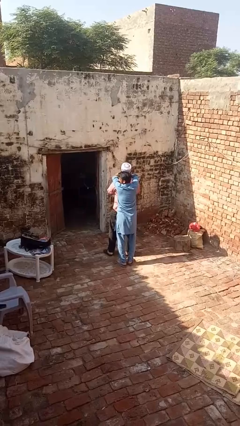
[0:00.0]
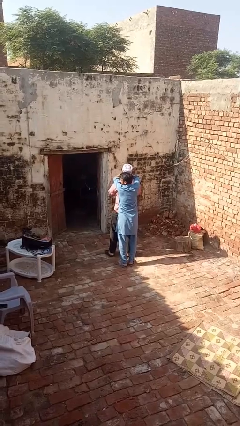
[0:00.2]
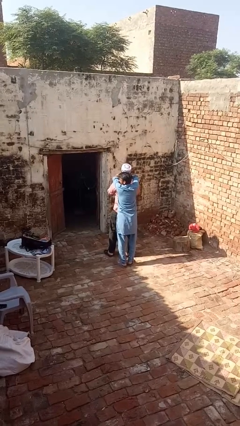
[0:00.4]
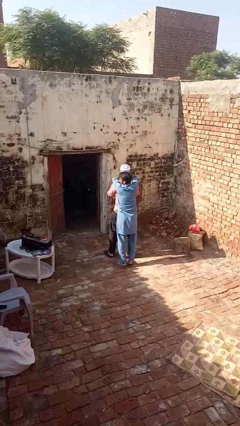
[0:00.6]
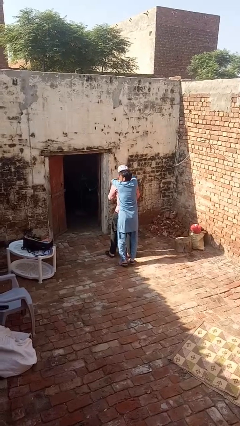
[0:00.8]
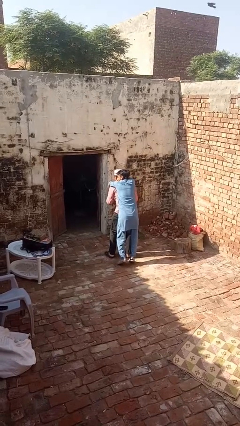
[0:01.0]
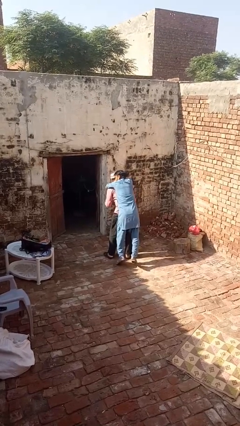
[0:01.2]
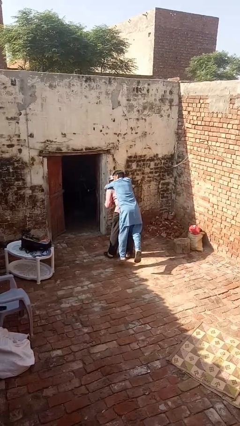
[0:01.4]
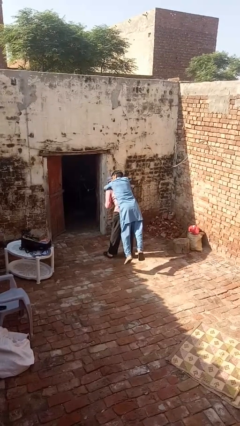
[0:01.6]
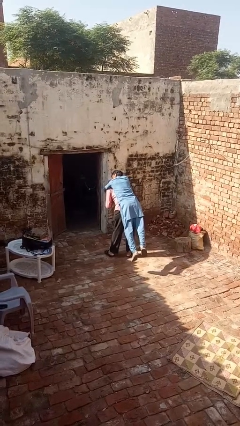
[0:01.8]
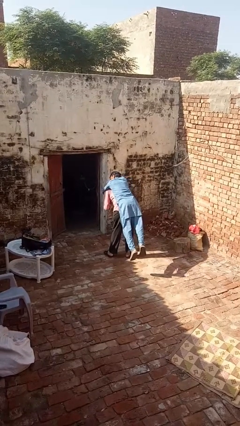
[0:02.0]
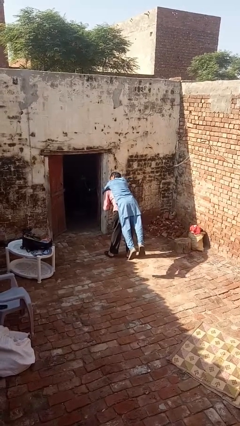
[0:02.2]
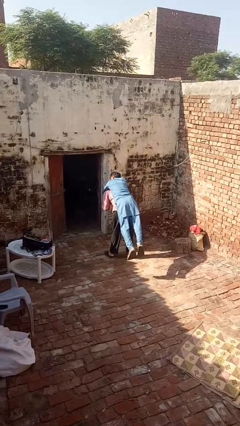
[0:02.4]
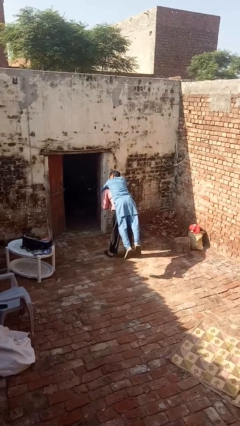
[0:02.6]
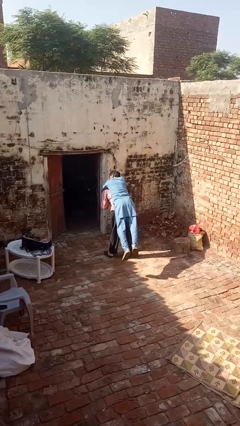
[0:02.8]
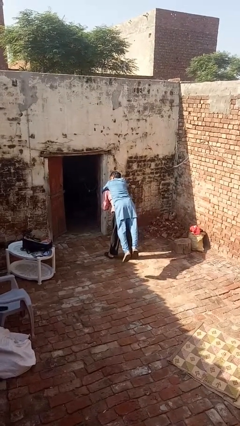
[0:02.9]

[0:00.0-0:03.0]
person carries person over shoulder

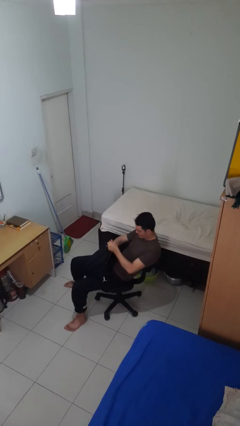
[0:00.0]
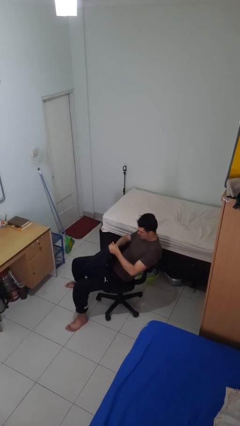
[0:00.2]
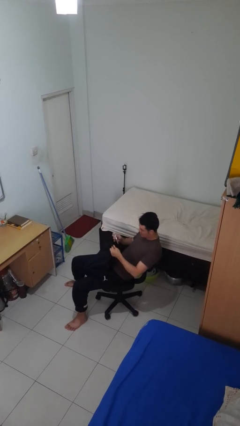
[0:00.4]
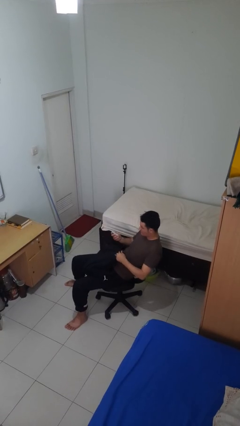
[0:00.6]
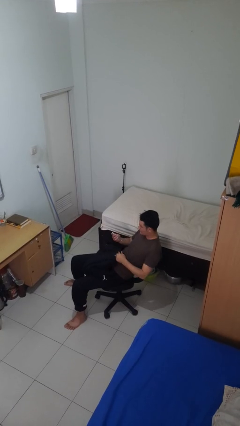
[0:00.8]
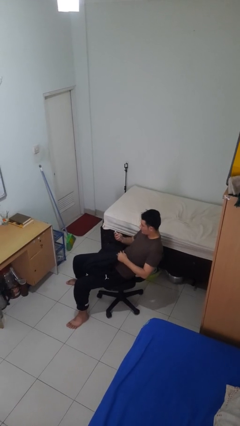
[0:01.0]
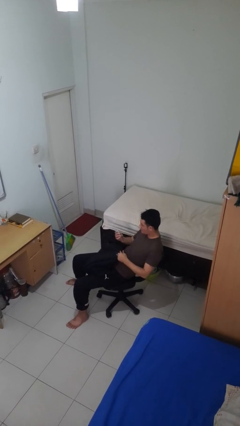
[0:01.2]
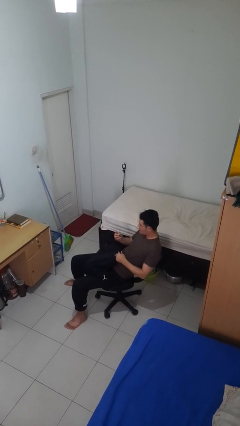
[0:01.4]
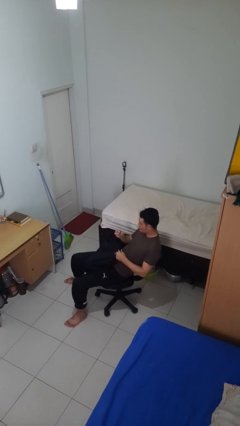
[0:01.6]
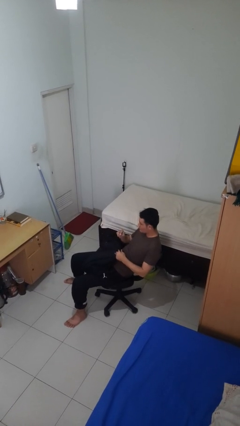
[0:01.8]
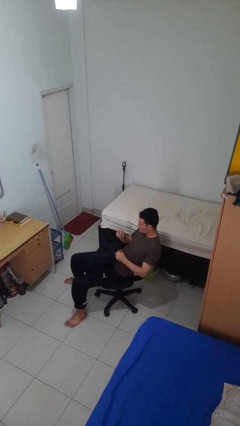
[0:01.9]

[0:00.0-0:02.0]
person takes object from backpack

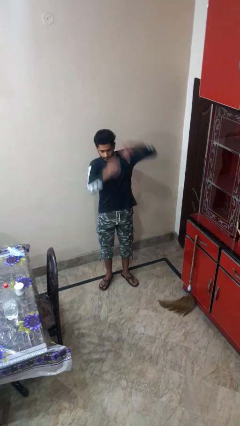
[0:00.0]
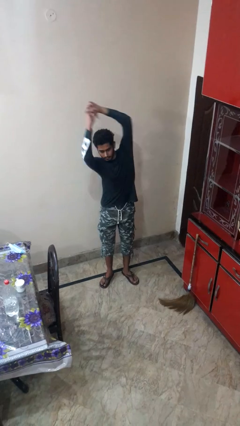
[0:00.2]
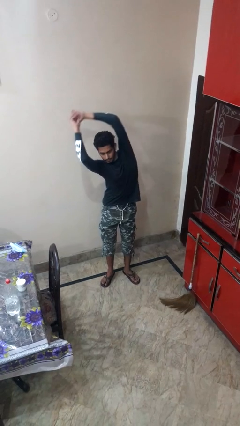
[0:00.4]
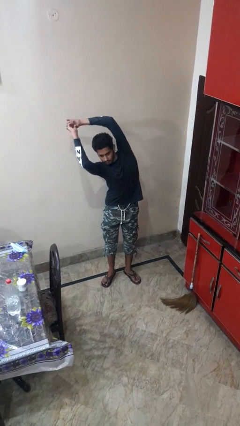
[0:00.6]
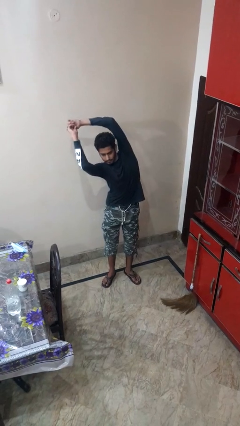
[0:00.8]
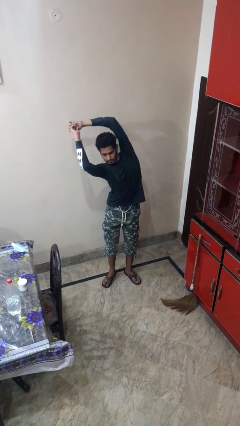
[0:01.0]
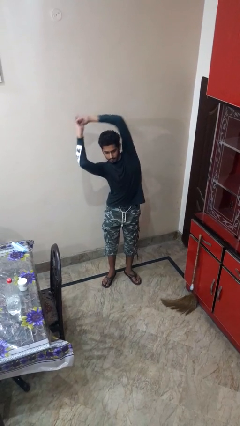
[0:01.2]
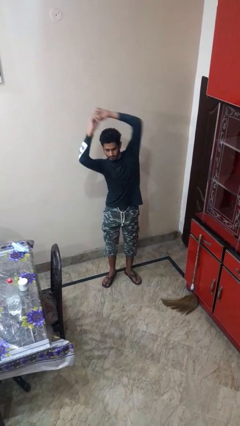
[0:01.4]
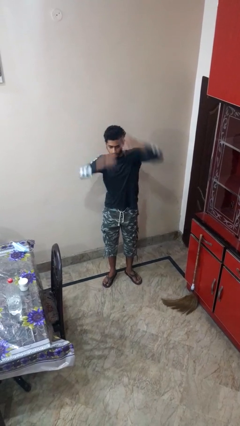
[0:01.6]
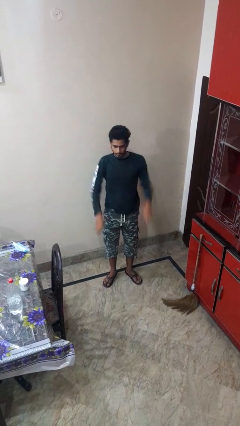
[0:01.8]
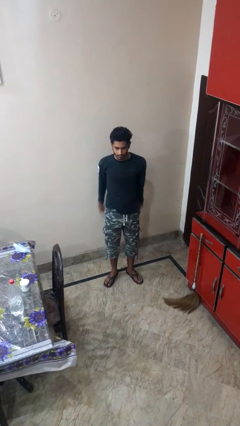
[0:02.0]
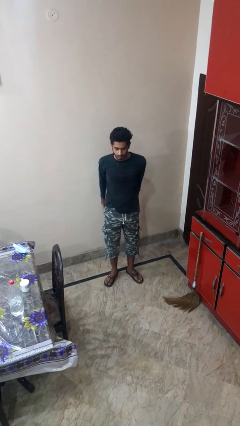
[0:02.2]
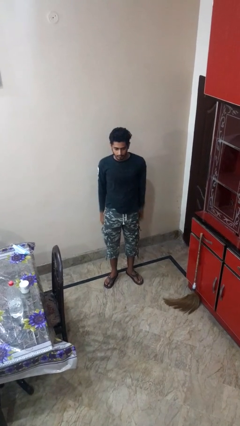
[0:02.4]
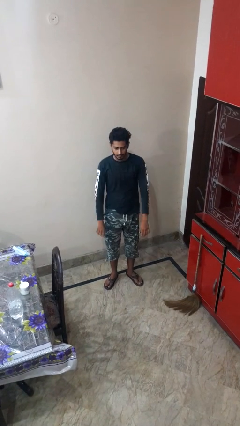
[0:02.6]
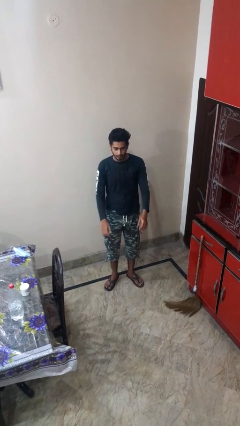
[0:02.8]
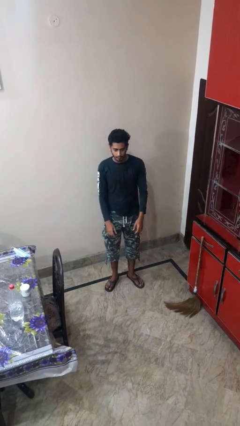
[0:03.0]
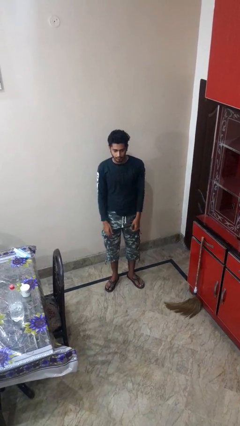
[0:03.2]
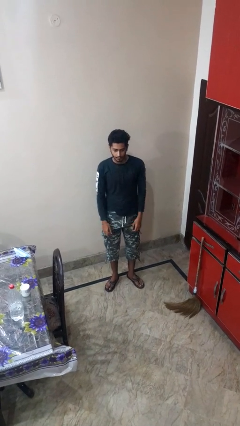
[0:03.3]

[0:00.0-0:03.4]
person stretches arms to side

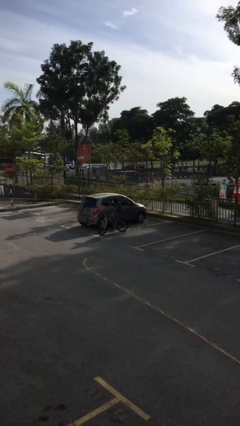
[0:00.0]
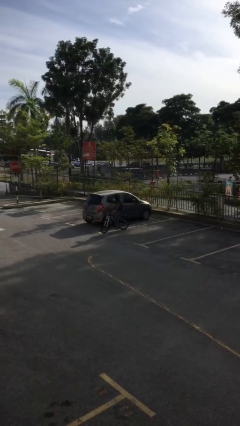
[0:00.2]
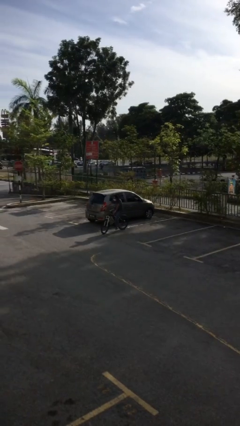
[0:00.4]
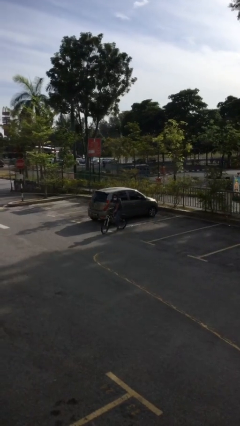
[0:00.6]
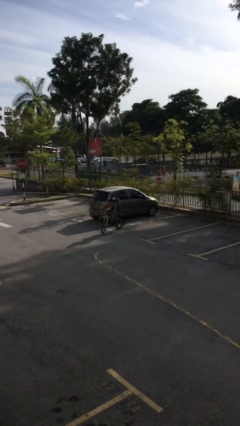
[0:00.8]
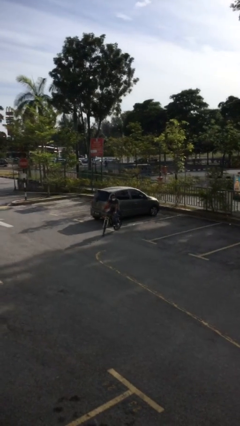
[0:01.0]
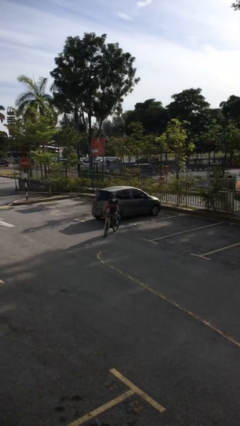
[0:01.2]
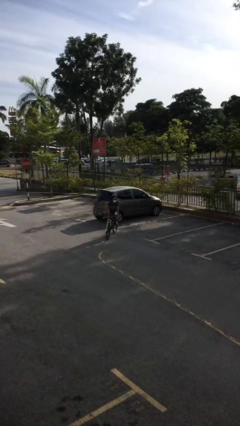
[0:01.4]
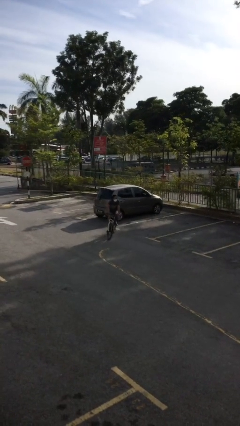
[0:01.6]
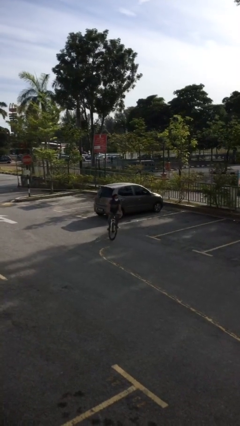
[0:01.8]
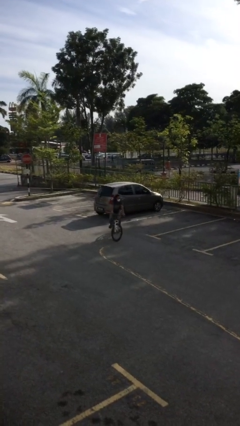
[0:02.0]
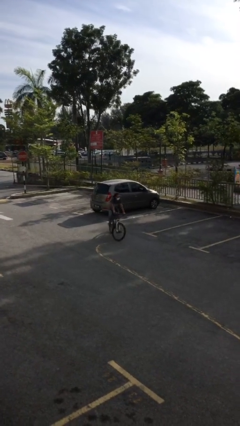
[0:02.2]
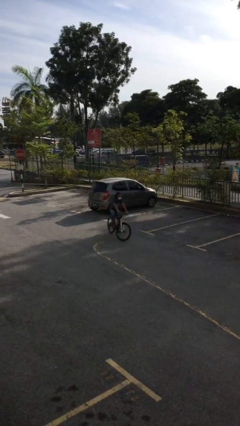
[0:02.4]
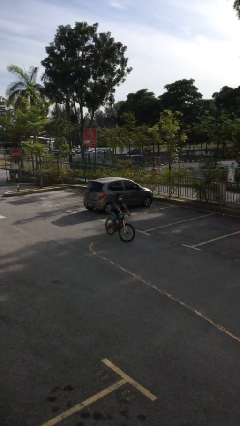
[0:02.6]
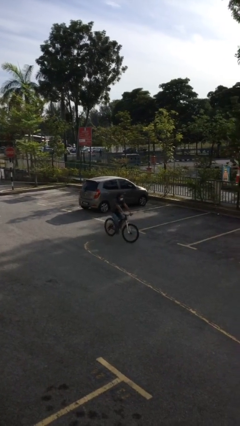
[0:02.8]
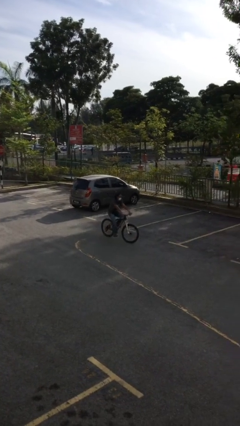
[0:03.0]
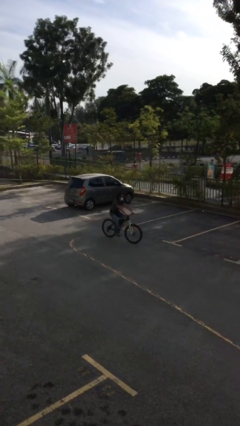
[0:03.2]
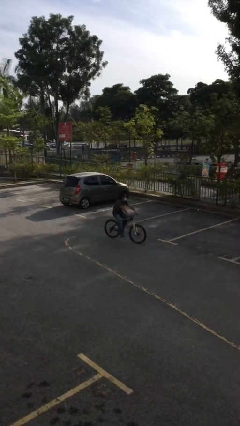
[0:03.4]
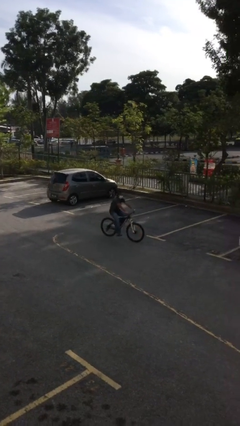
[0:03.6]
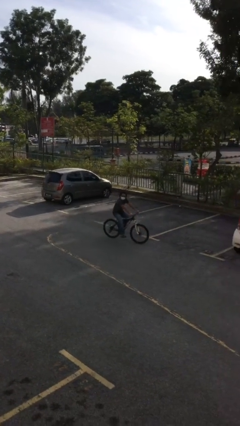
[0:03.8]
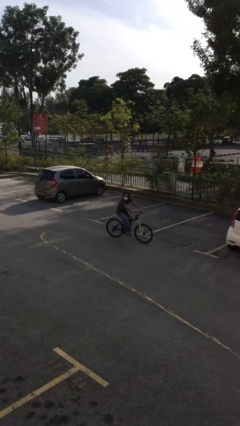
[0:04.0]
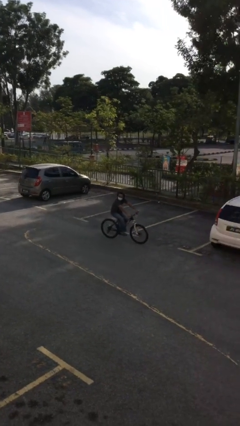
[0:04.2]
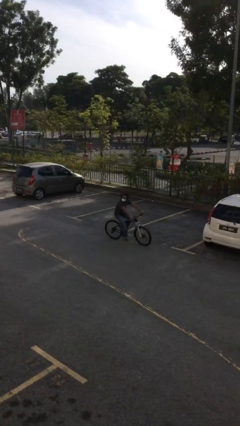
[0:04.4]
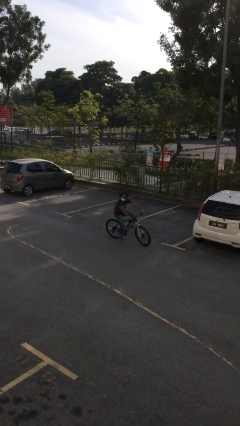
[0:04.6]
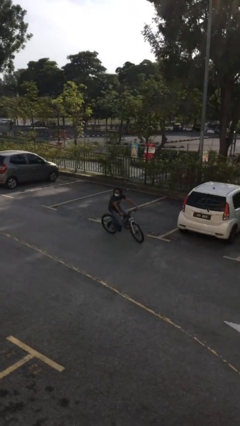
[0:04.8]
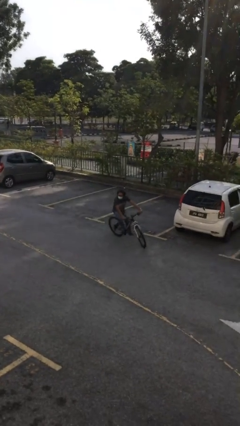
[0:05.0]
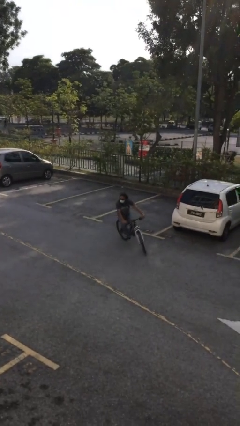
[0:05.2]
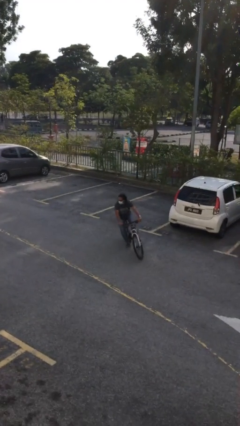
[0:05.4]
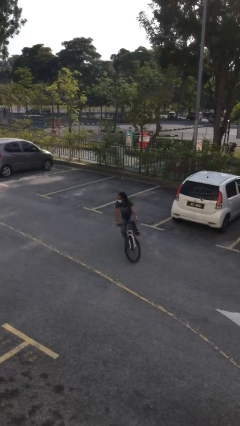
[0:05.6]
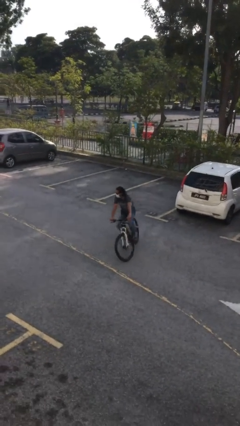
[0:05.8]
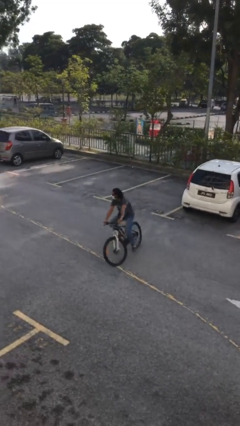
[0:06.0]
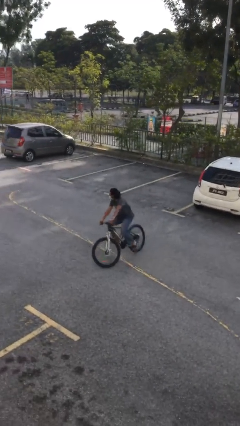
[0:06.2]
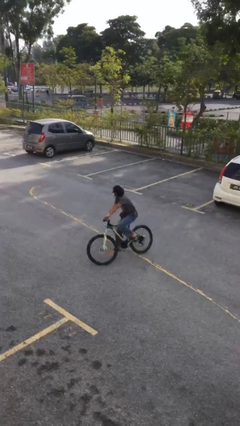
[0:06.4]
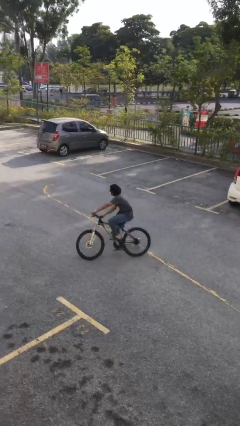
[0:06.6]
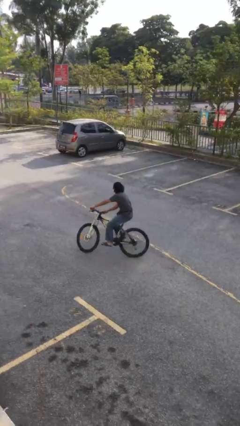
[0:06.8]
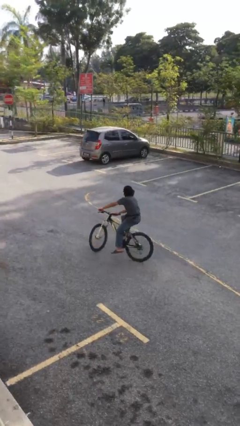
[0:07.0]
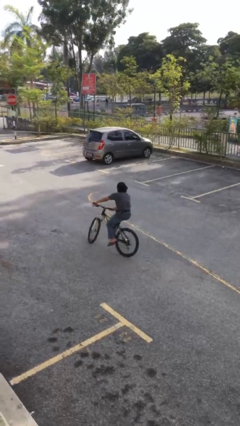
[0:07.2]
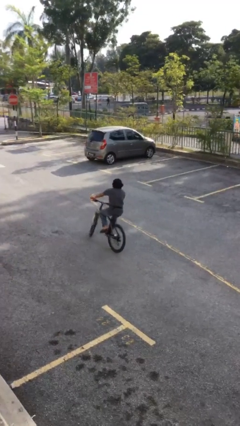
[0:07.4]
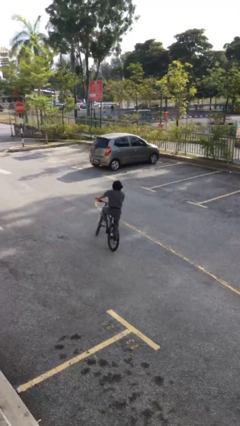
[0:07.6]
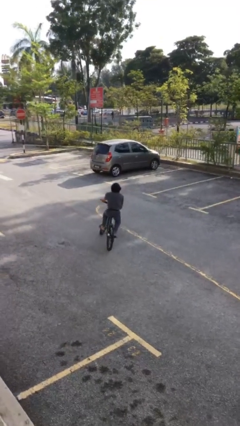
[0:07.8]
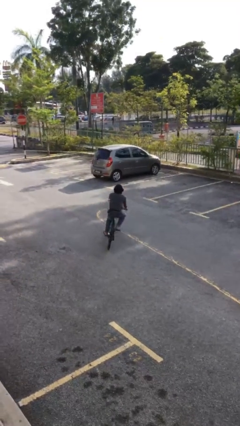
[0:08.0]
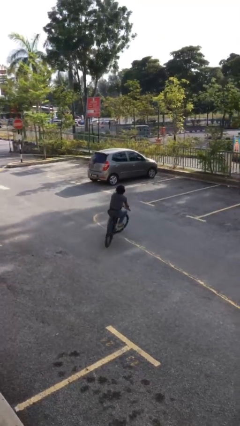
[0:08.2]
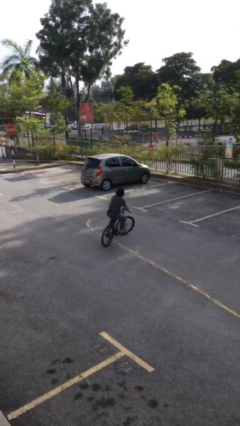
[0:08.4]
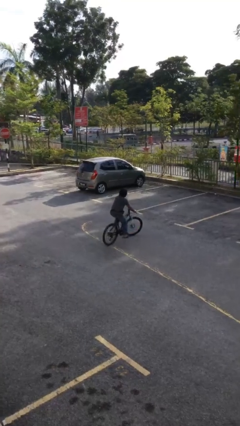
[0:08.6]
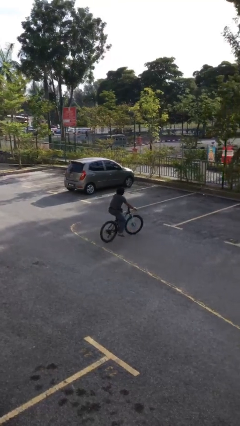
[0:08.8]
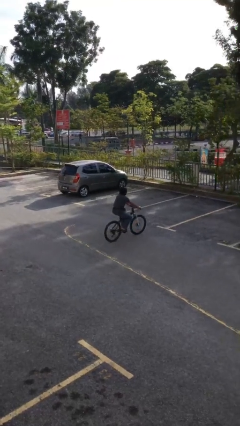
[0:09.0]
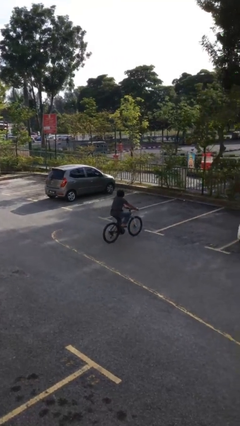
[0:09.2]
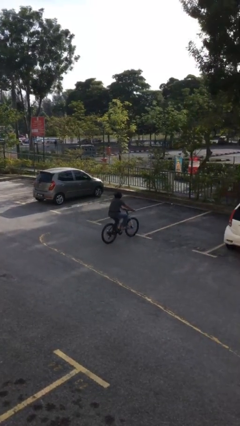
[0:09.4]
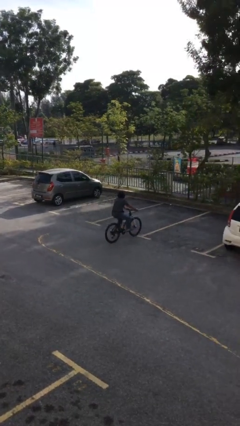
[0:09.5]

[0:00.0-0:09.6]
person rides bicycle
